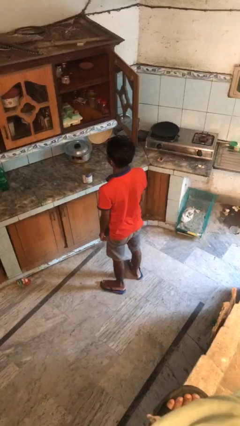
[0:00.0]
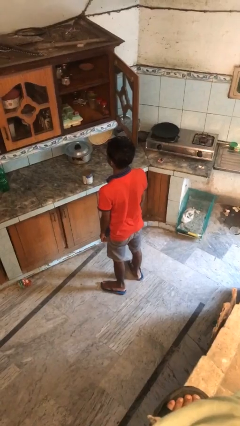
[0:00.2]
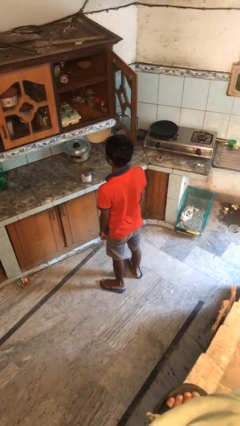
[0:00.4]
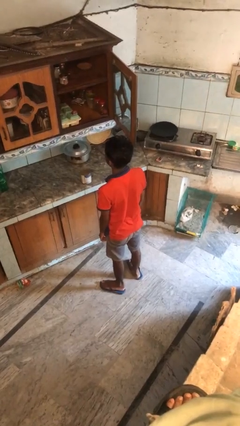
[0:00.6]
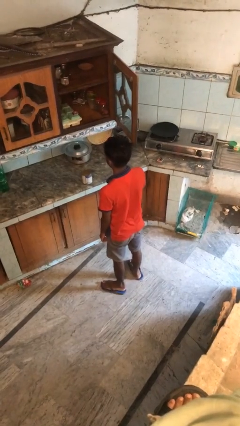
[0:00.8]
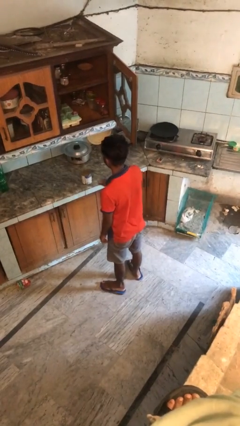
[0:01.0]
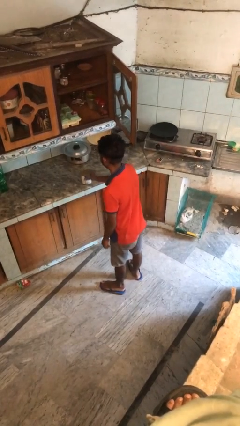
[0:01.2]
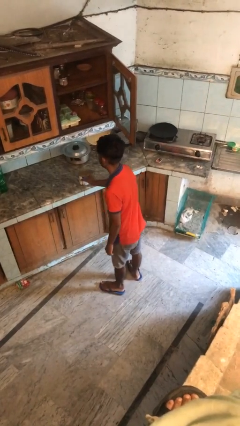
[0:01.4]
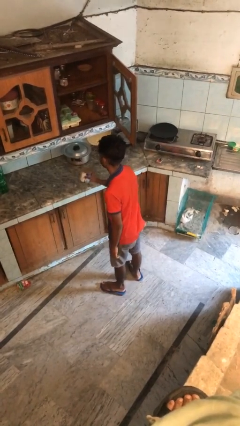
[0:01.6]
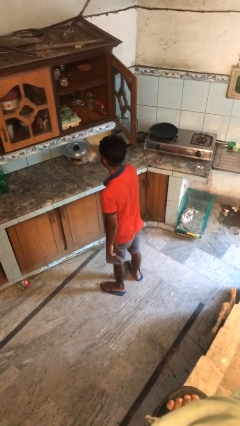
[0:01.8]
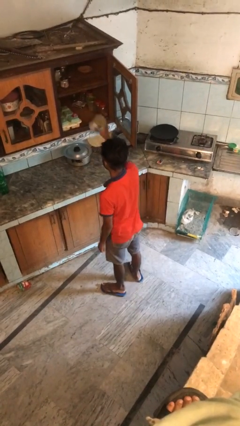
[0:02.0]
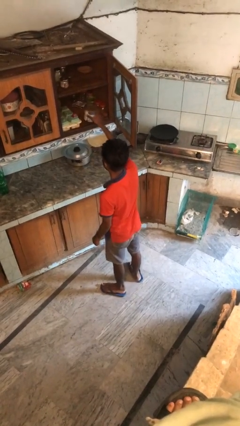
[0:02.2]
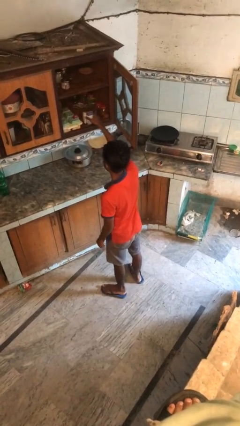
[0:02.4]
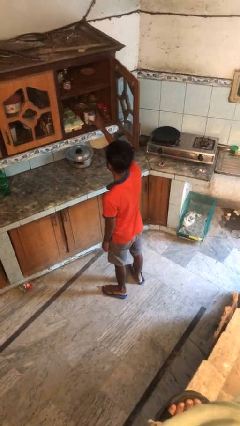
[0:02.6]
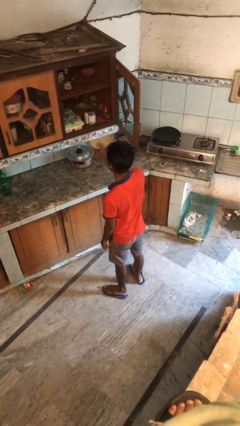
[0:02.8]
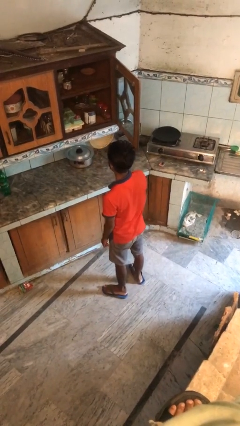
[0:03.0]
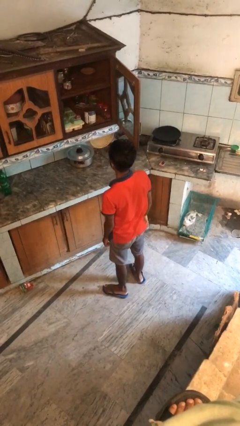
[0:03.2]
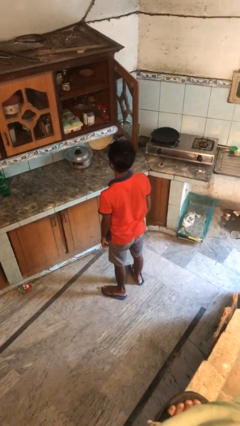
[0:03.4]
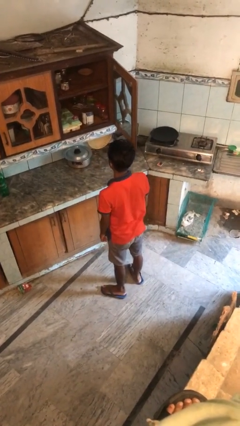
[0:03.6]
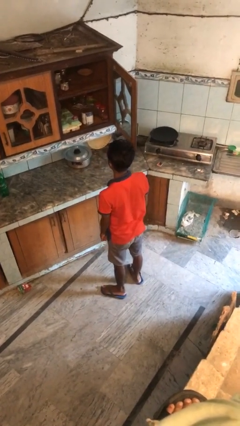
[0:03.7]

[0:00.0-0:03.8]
person puts object in cabinet

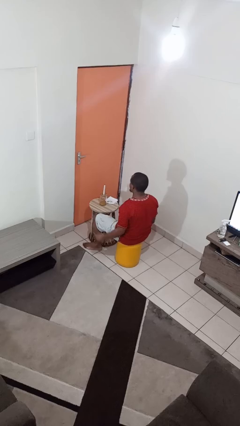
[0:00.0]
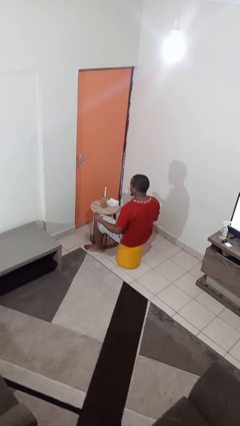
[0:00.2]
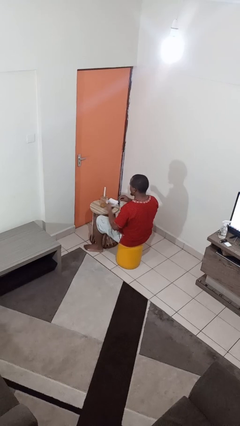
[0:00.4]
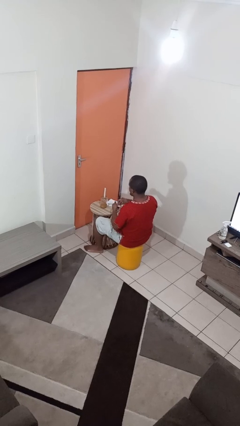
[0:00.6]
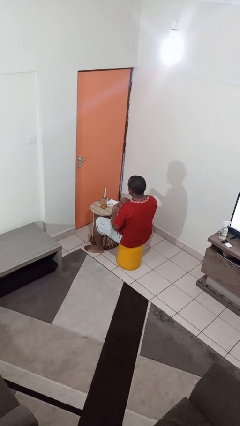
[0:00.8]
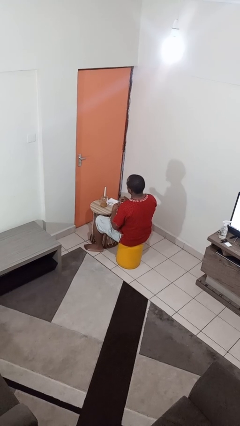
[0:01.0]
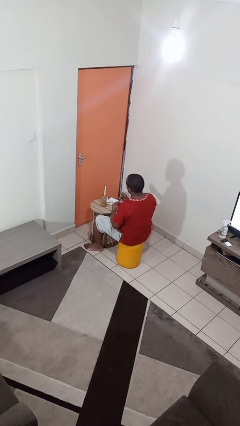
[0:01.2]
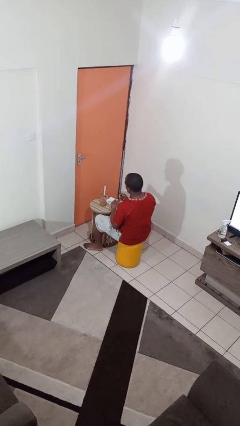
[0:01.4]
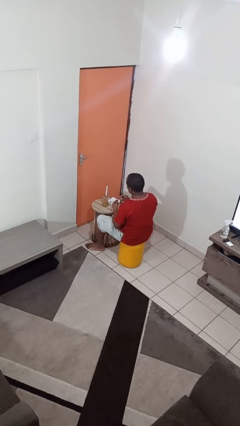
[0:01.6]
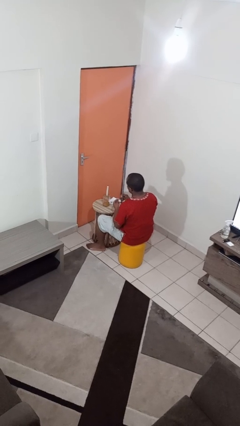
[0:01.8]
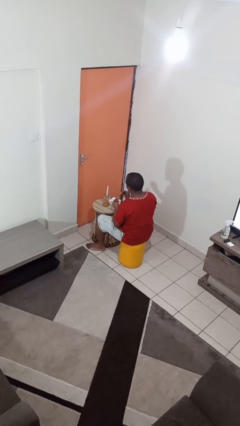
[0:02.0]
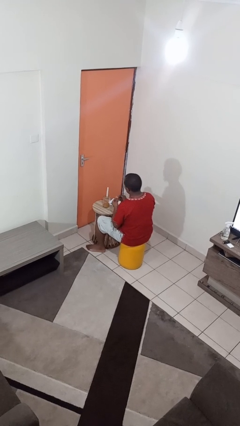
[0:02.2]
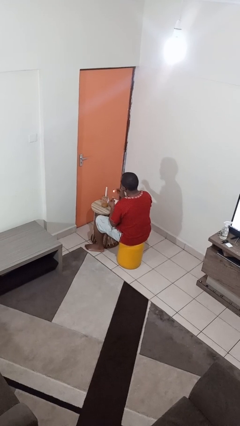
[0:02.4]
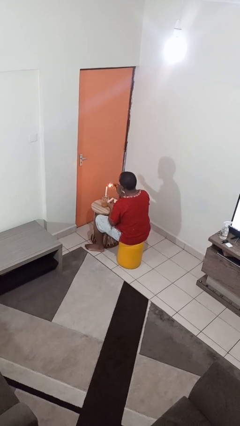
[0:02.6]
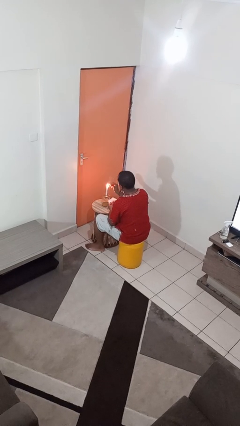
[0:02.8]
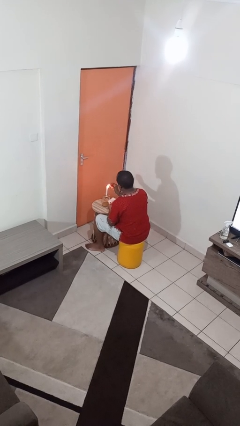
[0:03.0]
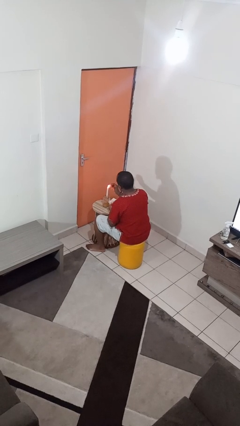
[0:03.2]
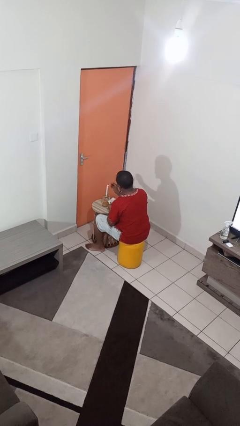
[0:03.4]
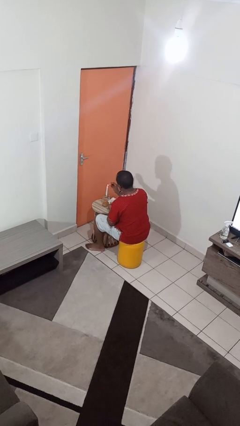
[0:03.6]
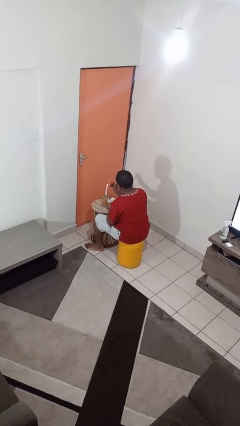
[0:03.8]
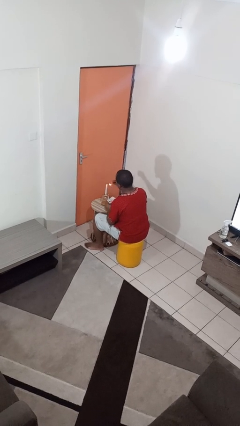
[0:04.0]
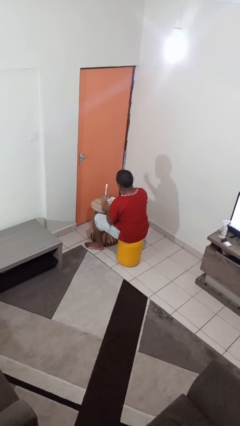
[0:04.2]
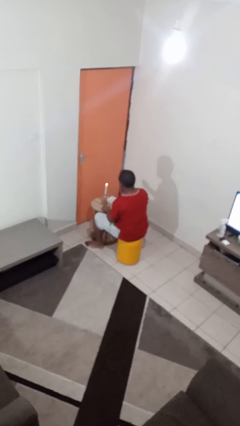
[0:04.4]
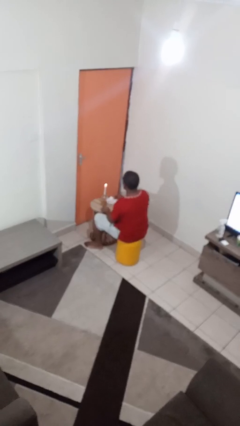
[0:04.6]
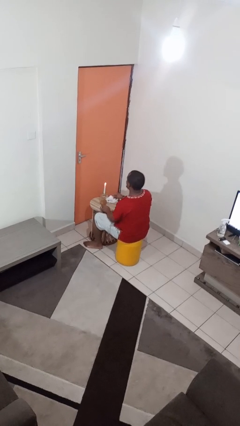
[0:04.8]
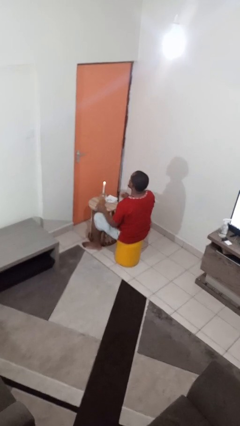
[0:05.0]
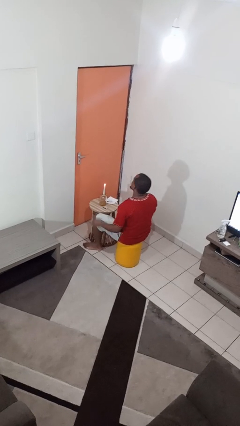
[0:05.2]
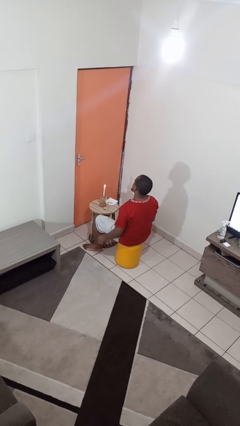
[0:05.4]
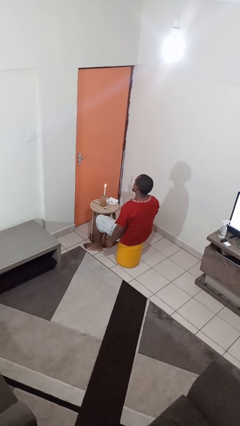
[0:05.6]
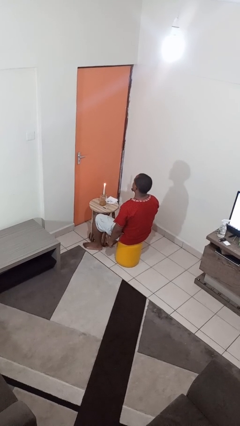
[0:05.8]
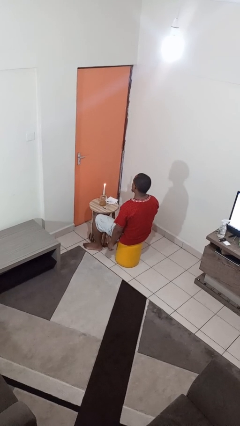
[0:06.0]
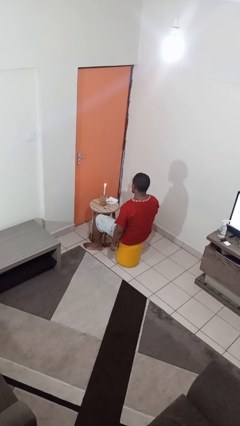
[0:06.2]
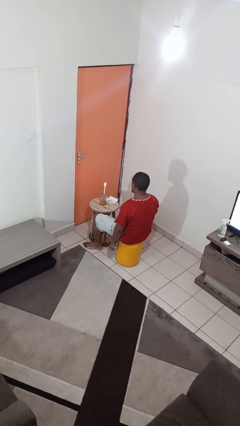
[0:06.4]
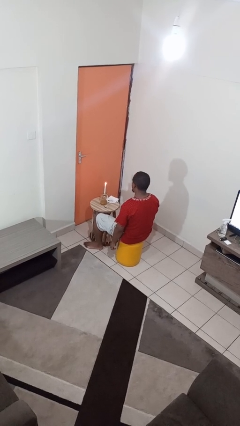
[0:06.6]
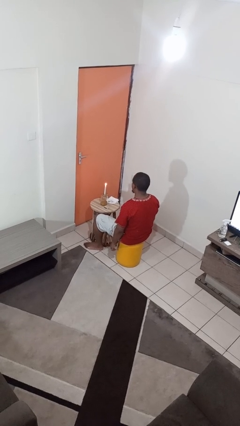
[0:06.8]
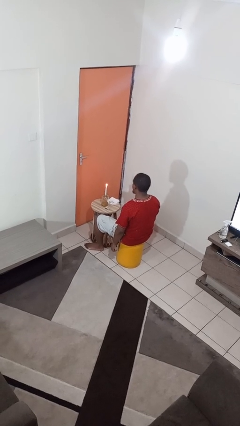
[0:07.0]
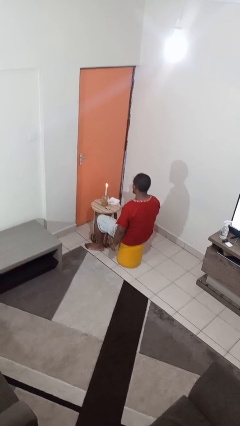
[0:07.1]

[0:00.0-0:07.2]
person lights candle

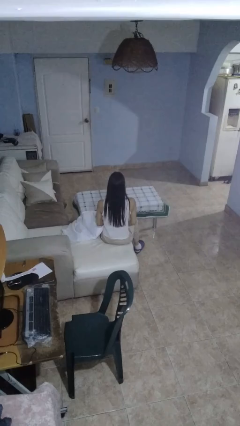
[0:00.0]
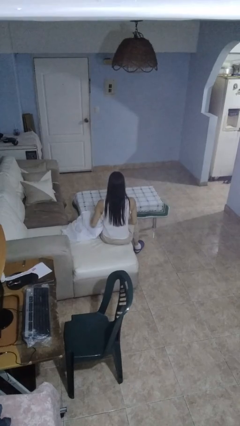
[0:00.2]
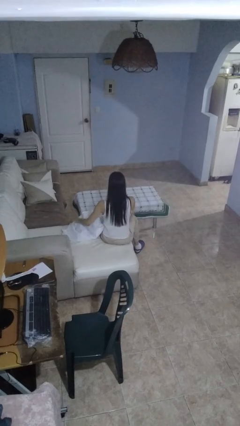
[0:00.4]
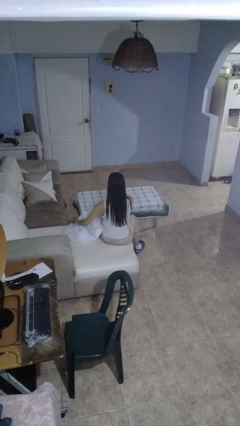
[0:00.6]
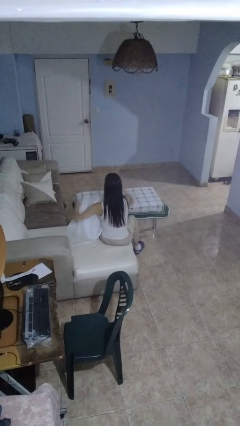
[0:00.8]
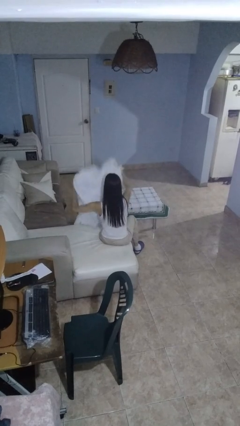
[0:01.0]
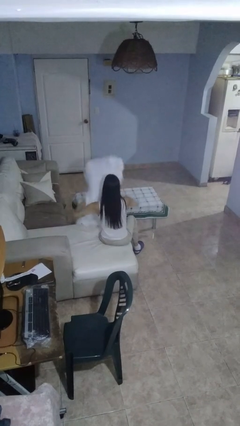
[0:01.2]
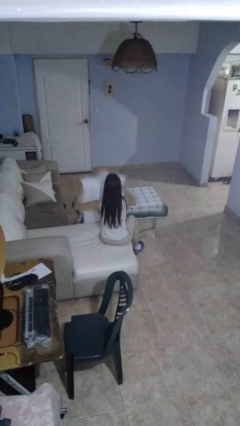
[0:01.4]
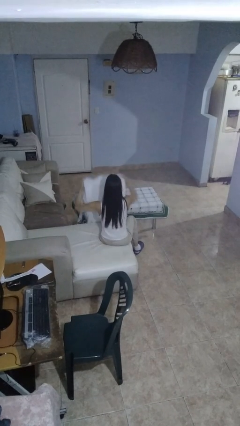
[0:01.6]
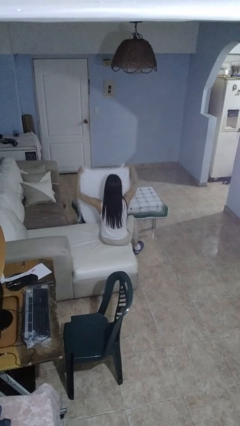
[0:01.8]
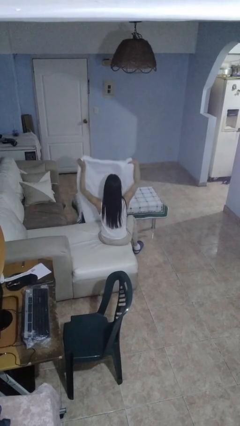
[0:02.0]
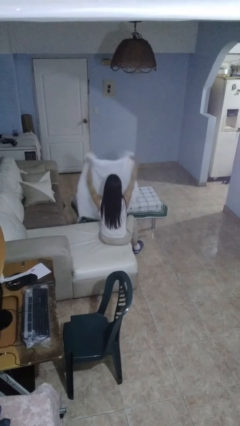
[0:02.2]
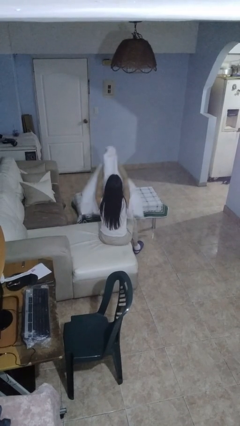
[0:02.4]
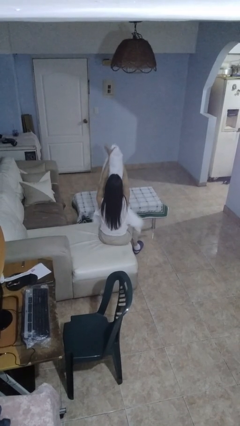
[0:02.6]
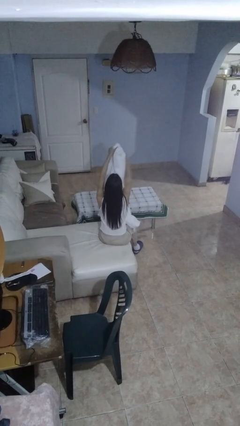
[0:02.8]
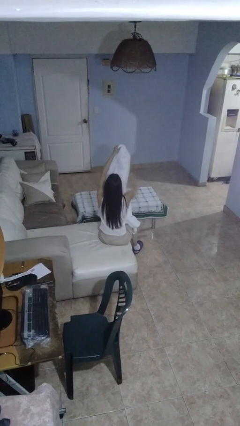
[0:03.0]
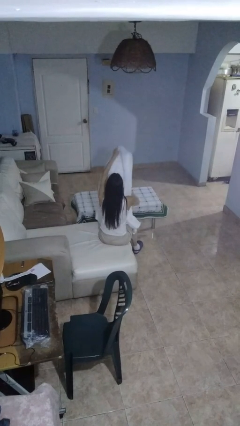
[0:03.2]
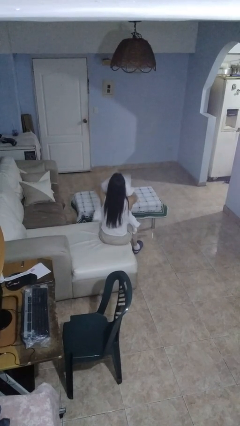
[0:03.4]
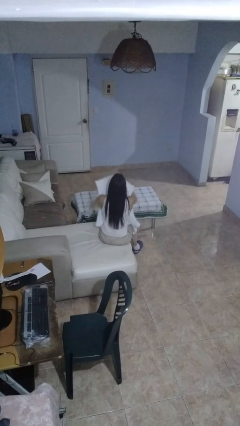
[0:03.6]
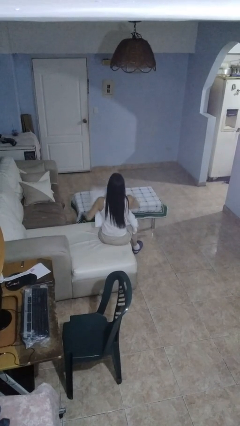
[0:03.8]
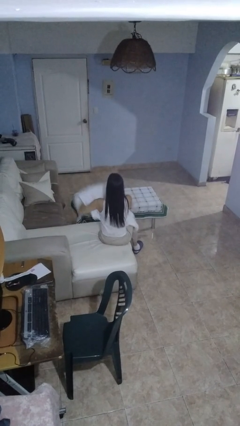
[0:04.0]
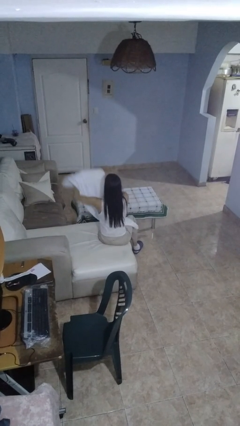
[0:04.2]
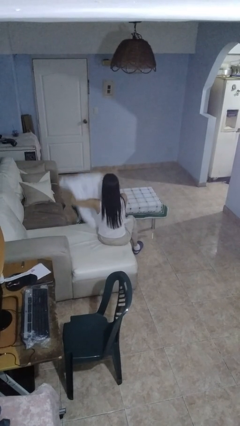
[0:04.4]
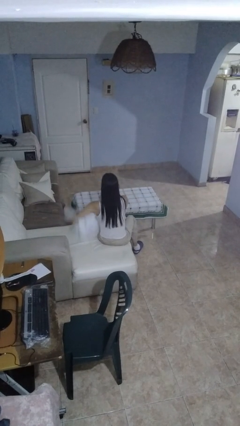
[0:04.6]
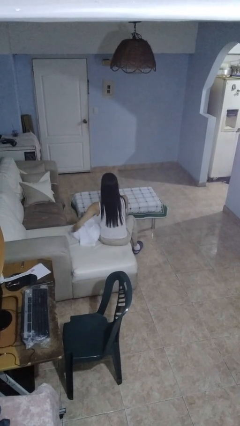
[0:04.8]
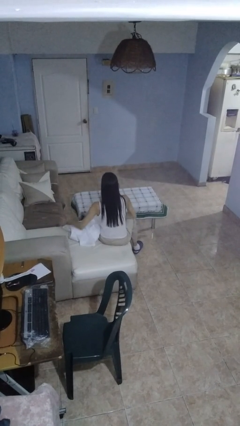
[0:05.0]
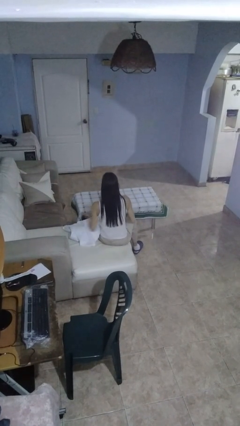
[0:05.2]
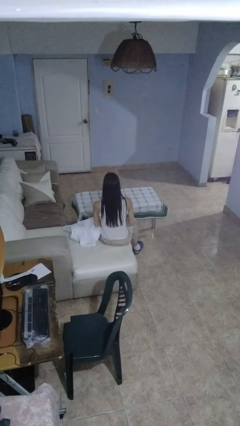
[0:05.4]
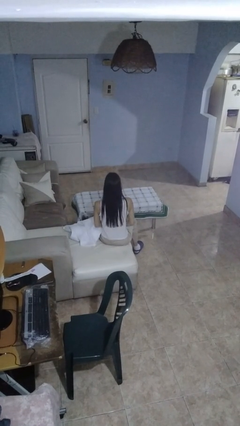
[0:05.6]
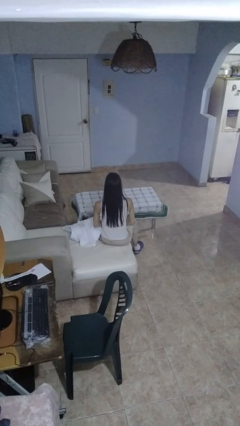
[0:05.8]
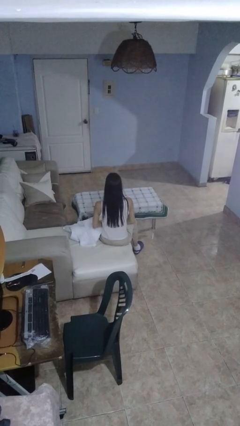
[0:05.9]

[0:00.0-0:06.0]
person folds blanket

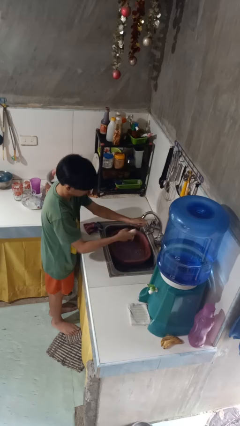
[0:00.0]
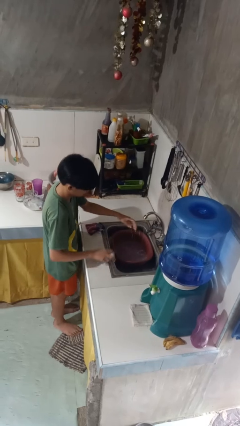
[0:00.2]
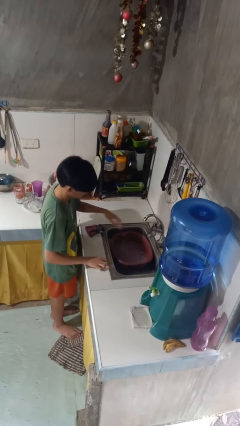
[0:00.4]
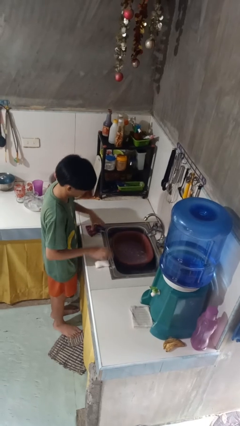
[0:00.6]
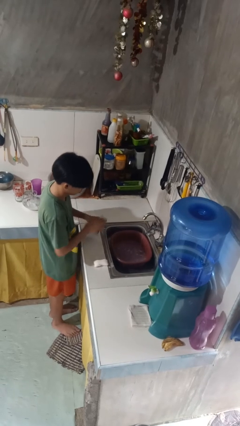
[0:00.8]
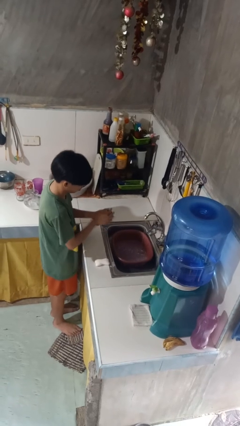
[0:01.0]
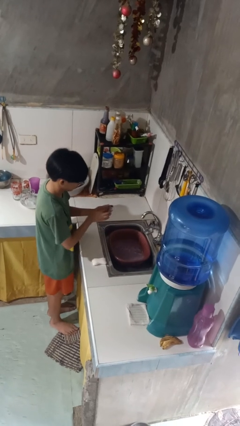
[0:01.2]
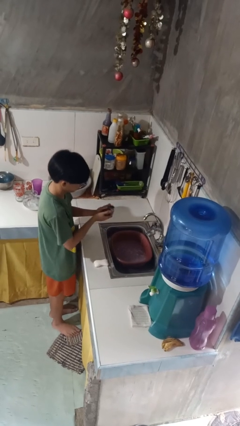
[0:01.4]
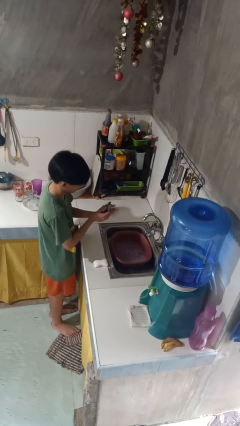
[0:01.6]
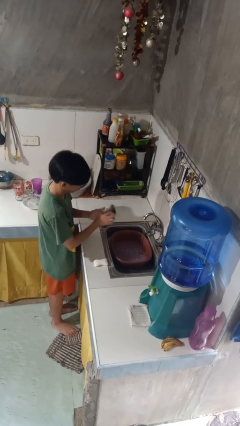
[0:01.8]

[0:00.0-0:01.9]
person dries hands with towel
